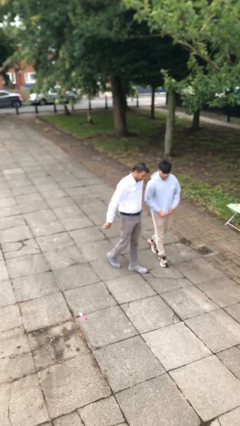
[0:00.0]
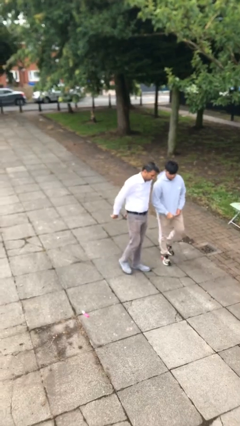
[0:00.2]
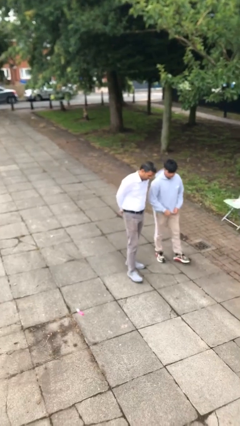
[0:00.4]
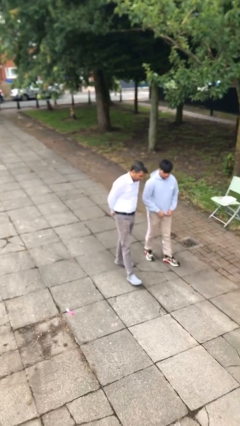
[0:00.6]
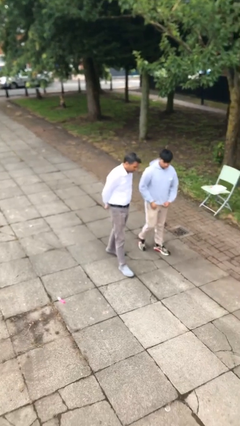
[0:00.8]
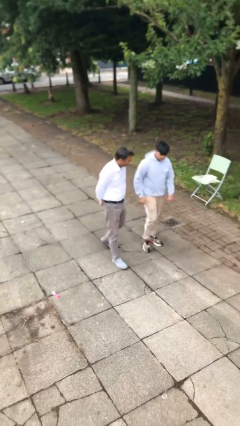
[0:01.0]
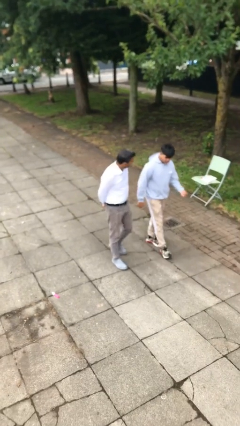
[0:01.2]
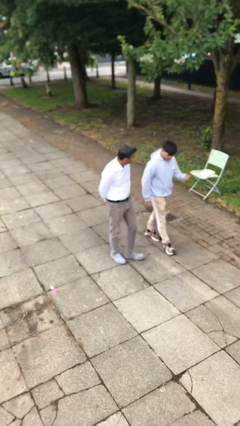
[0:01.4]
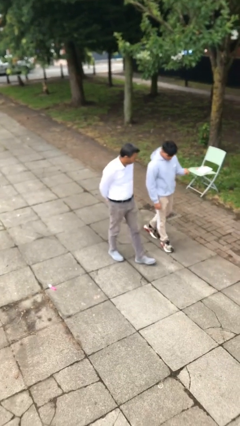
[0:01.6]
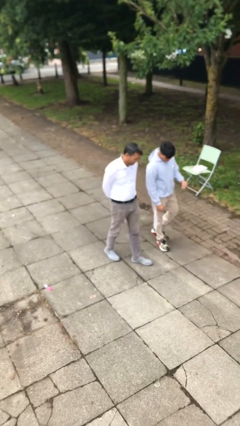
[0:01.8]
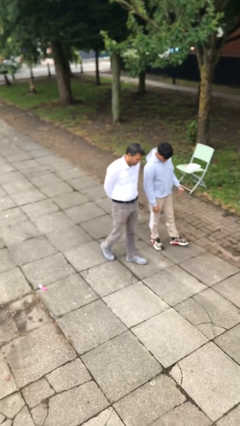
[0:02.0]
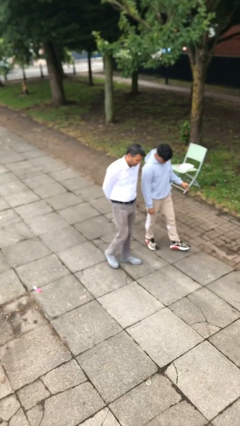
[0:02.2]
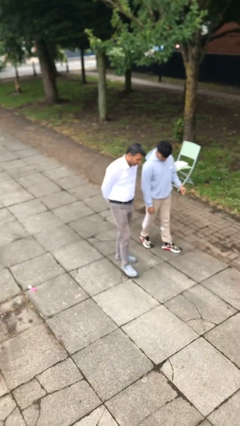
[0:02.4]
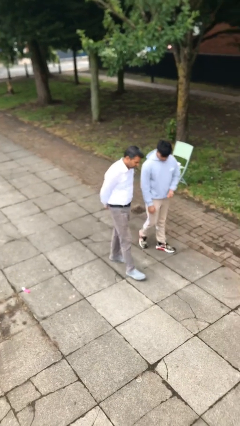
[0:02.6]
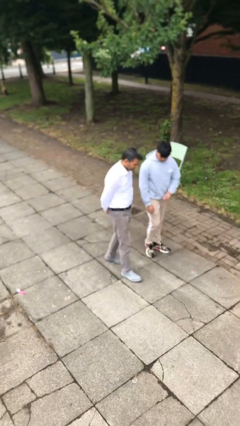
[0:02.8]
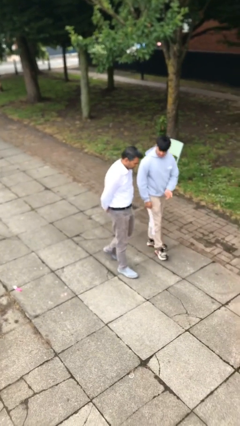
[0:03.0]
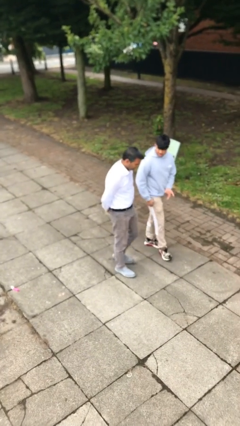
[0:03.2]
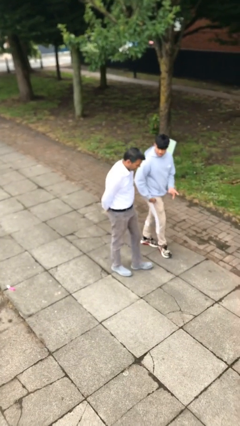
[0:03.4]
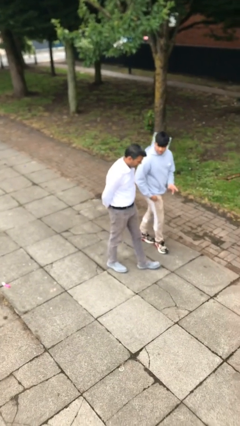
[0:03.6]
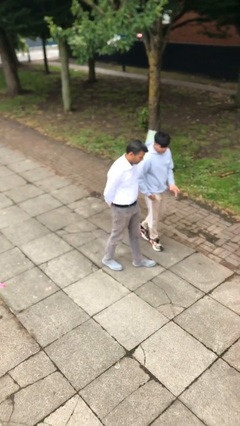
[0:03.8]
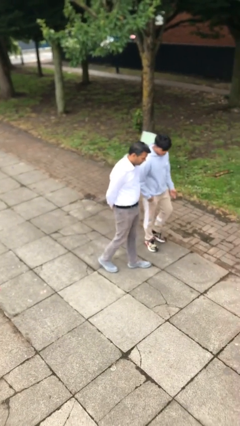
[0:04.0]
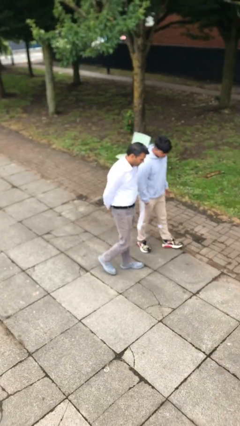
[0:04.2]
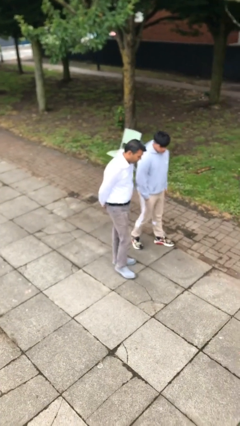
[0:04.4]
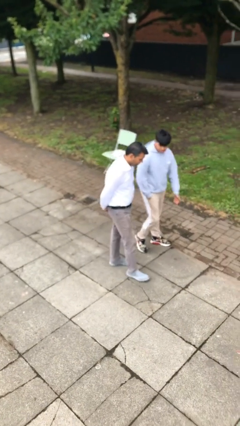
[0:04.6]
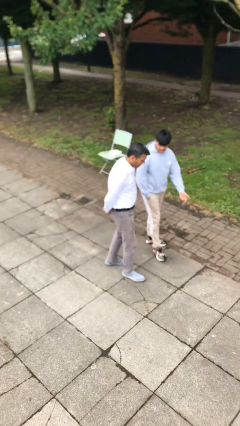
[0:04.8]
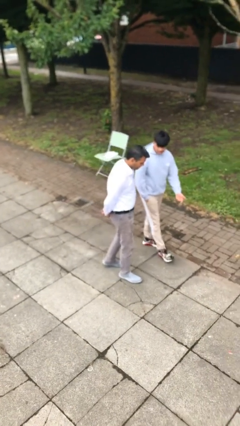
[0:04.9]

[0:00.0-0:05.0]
person talks to person

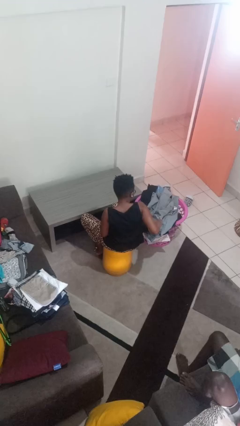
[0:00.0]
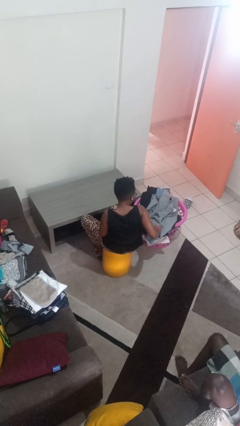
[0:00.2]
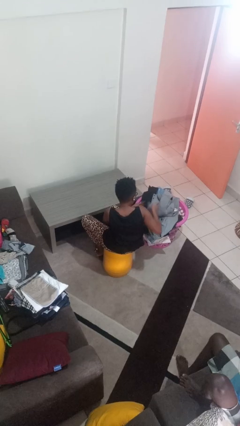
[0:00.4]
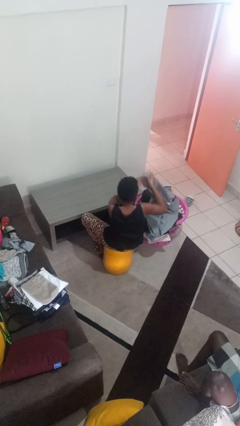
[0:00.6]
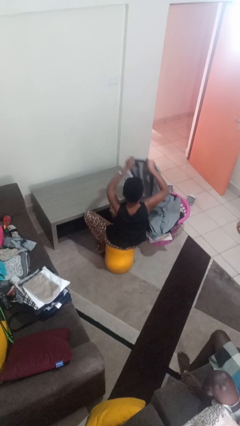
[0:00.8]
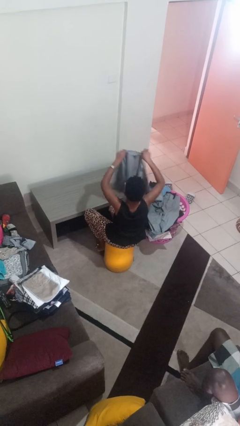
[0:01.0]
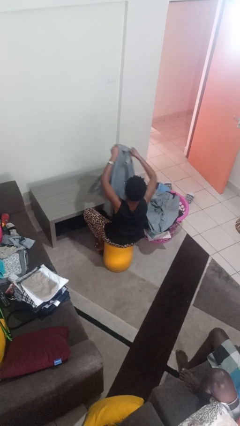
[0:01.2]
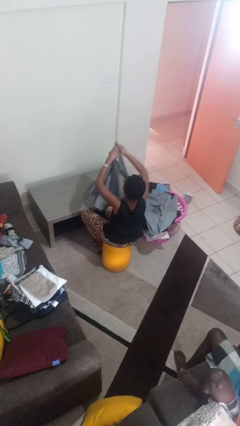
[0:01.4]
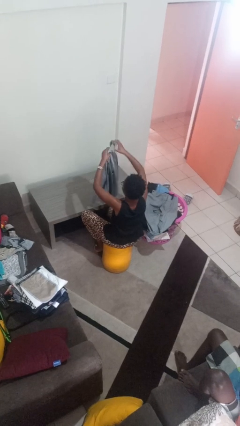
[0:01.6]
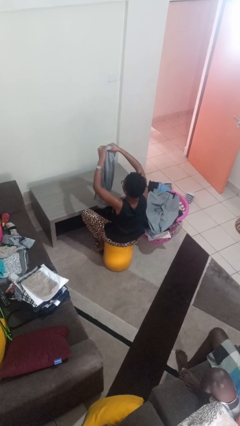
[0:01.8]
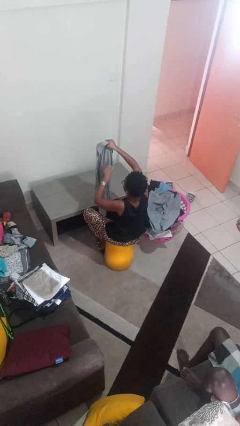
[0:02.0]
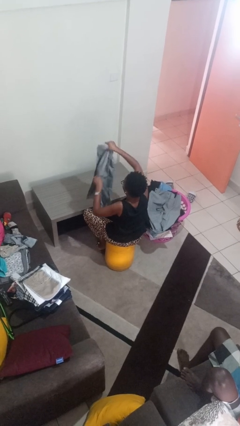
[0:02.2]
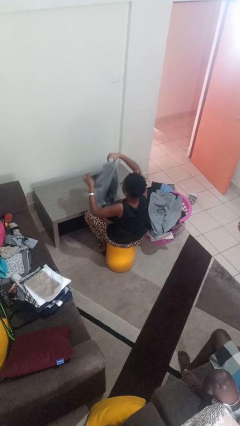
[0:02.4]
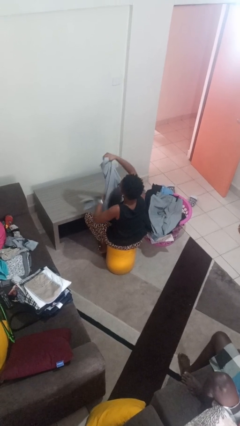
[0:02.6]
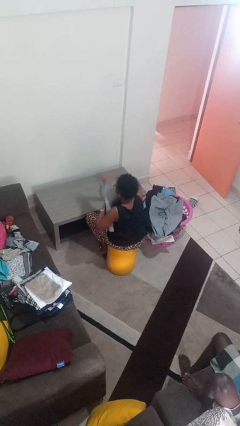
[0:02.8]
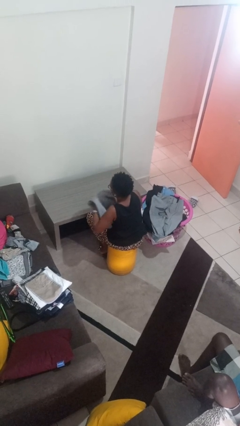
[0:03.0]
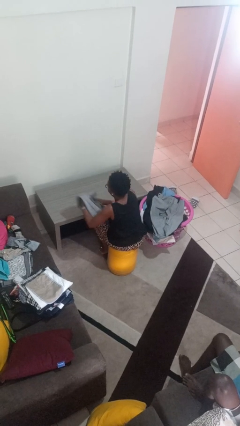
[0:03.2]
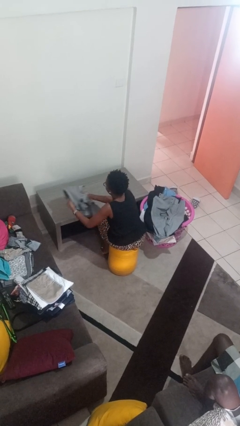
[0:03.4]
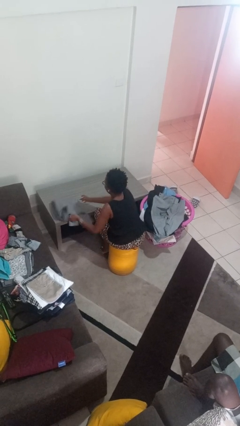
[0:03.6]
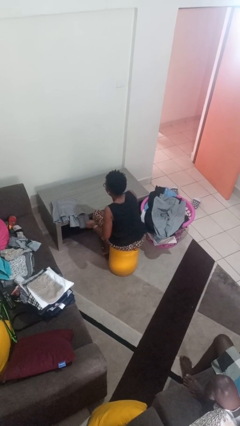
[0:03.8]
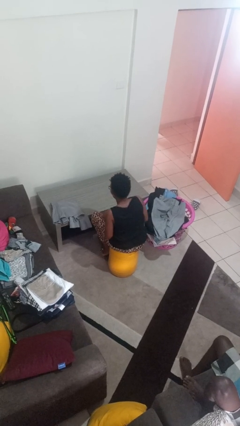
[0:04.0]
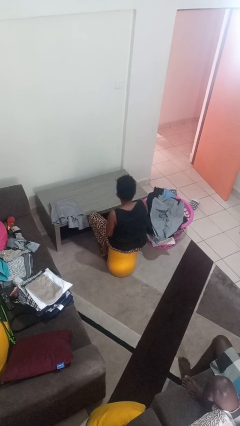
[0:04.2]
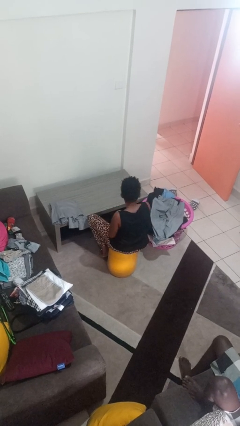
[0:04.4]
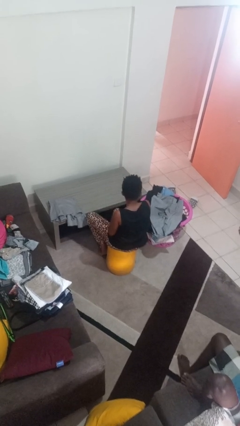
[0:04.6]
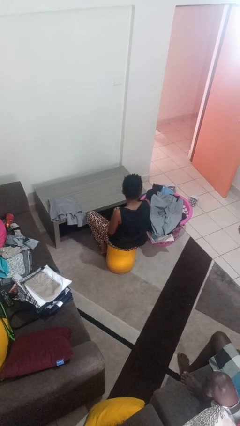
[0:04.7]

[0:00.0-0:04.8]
person folds shirt

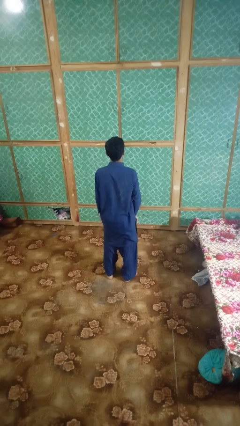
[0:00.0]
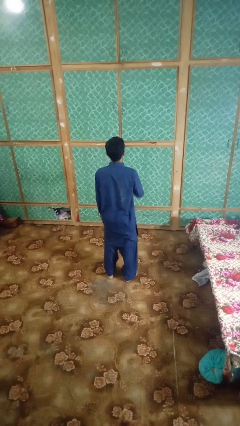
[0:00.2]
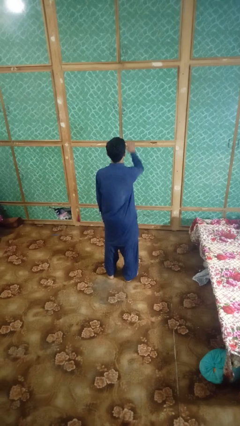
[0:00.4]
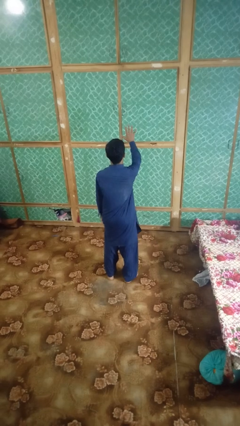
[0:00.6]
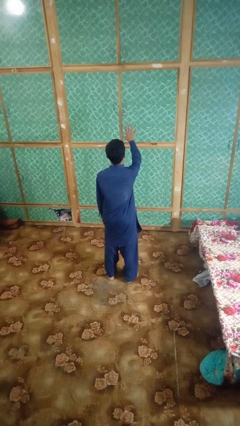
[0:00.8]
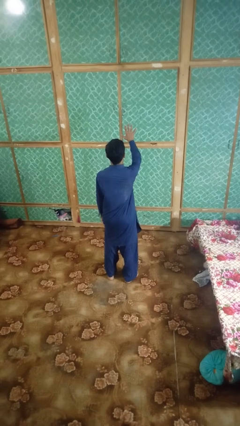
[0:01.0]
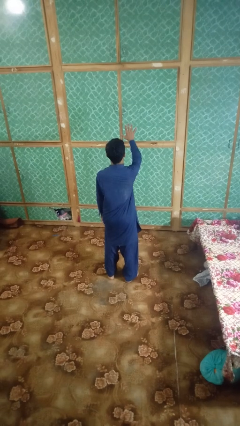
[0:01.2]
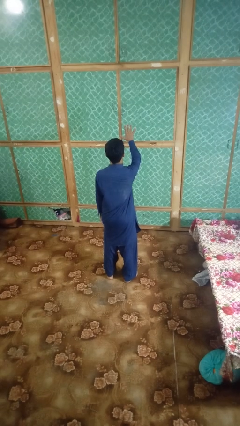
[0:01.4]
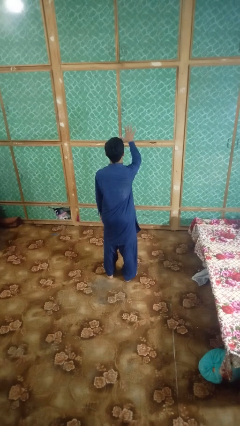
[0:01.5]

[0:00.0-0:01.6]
person gestures number five

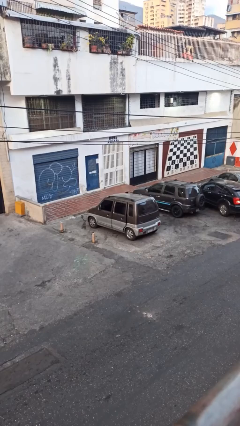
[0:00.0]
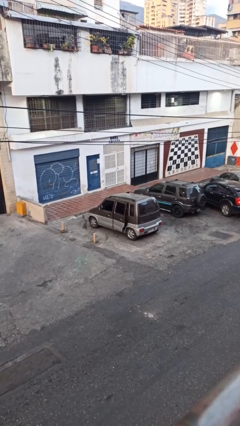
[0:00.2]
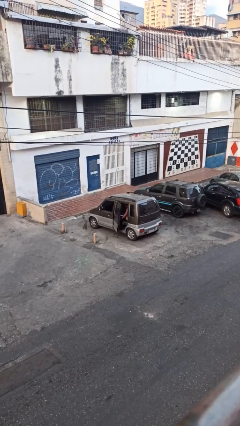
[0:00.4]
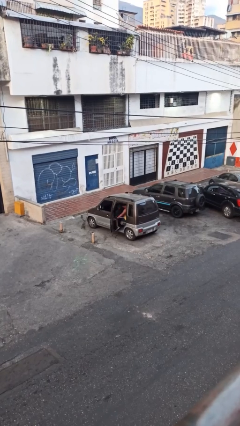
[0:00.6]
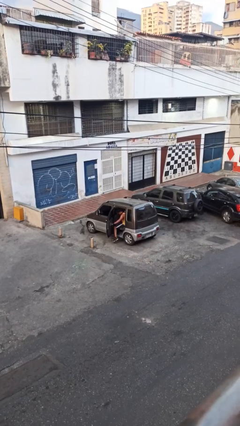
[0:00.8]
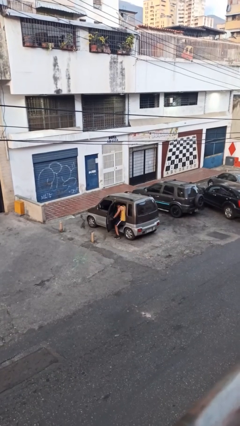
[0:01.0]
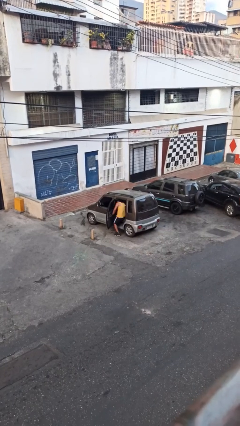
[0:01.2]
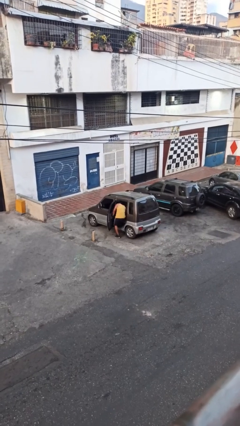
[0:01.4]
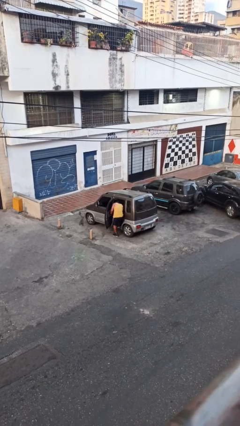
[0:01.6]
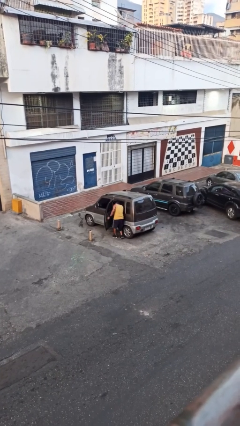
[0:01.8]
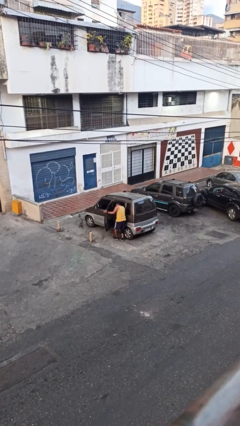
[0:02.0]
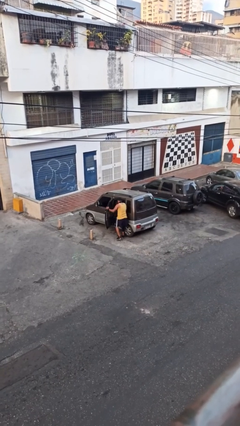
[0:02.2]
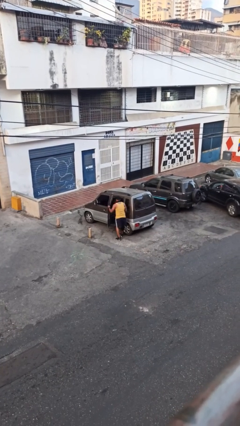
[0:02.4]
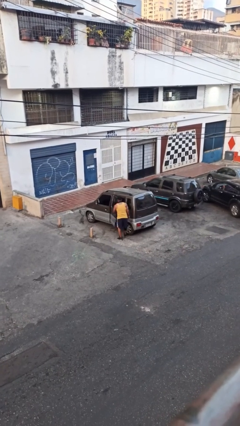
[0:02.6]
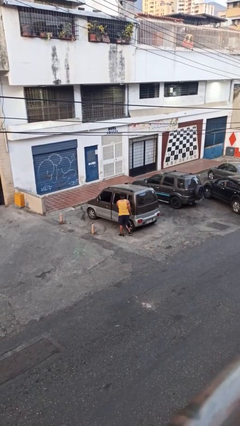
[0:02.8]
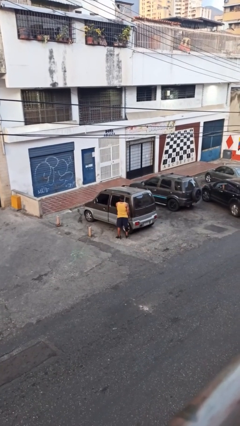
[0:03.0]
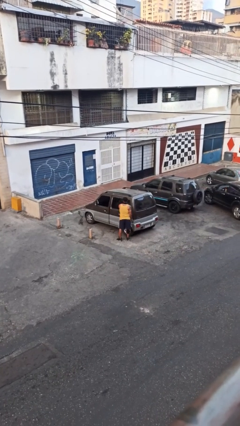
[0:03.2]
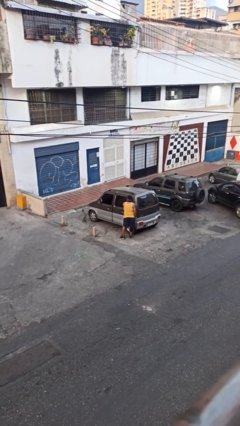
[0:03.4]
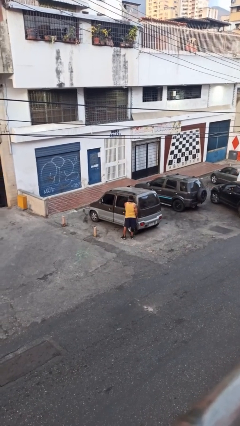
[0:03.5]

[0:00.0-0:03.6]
car drops off person

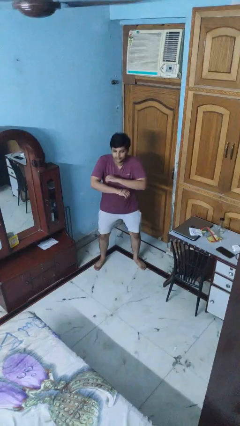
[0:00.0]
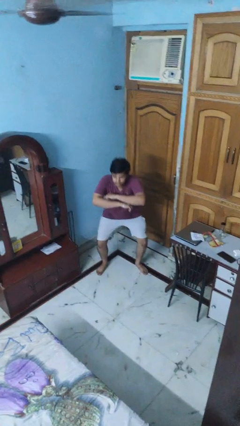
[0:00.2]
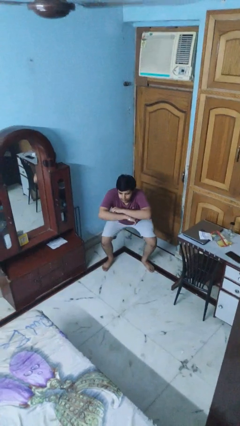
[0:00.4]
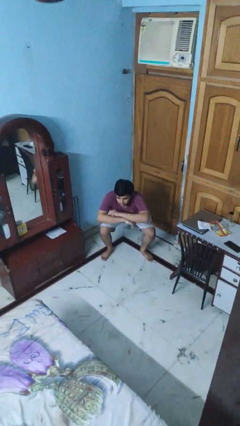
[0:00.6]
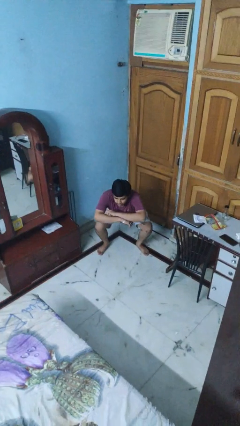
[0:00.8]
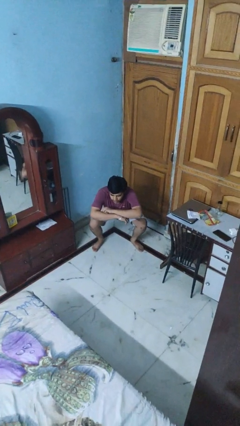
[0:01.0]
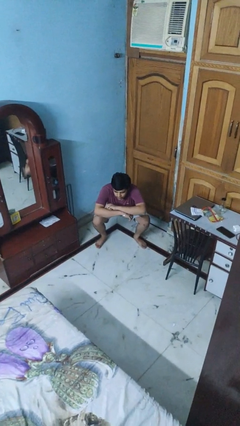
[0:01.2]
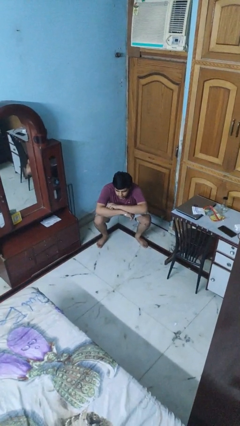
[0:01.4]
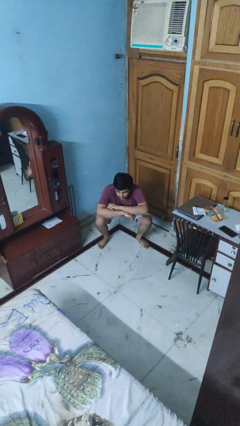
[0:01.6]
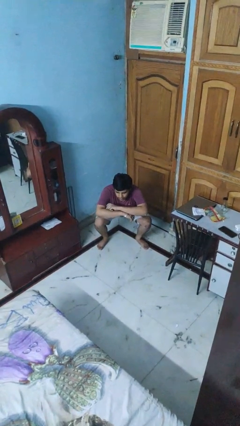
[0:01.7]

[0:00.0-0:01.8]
person squats

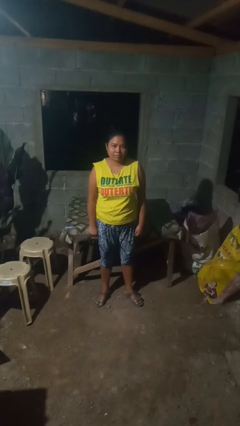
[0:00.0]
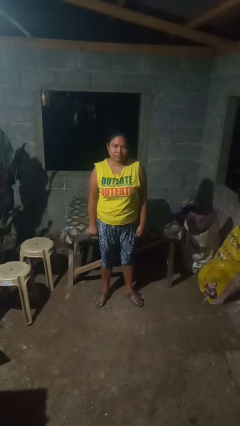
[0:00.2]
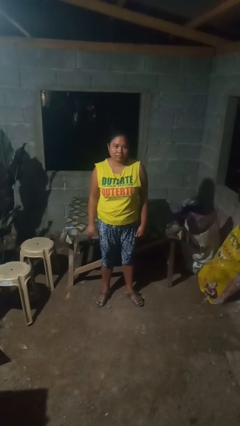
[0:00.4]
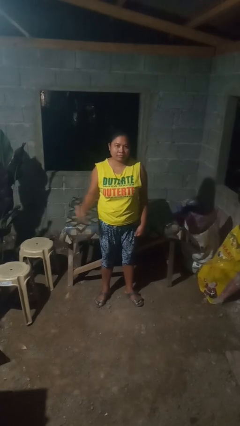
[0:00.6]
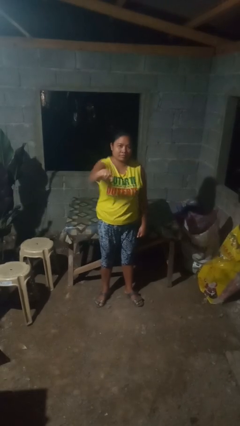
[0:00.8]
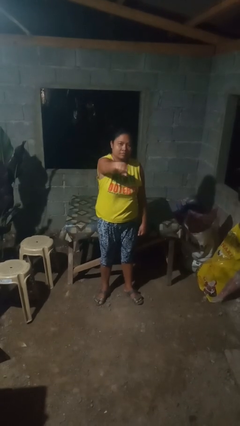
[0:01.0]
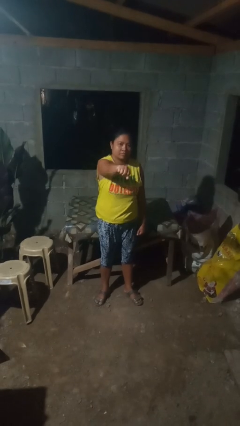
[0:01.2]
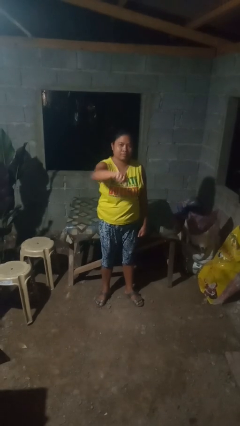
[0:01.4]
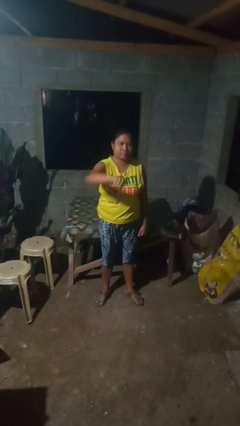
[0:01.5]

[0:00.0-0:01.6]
person punches
